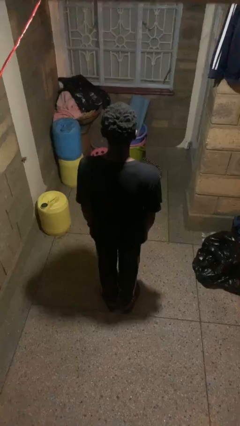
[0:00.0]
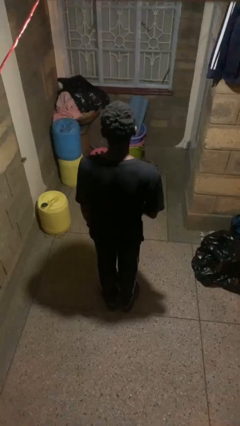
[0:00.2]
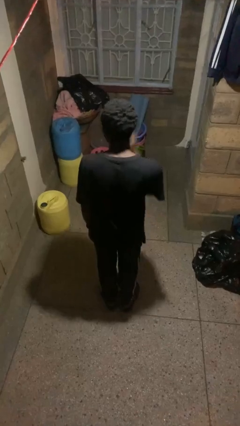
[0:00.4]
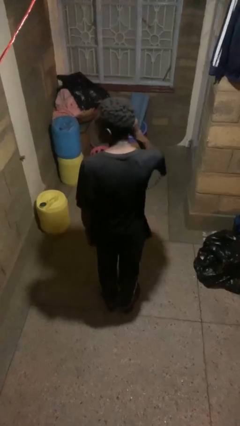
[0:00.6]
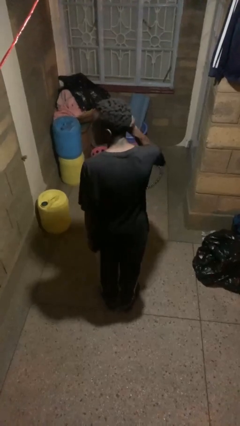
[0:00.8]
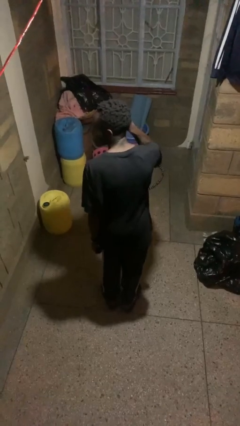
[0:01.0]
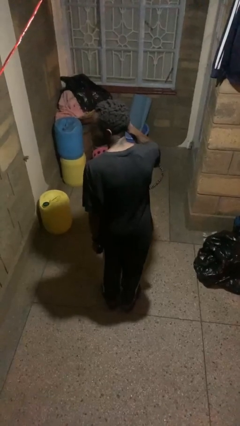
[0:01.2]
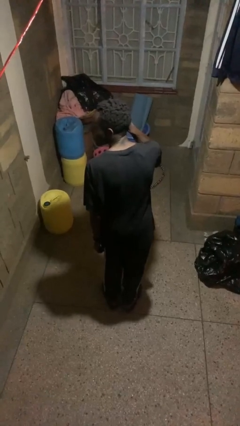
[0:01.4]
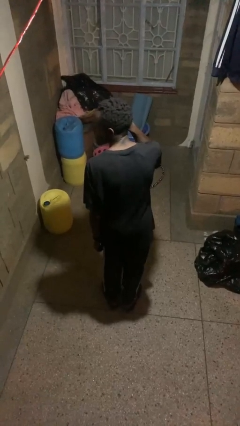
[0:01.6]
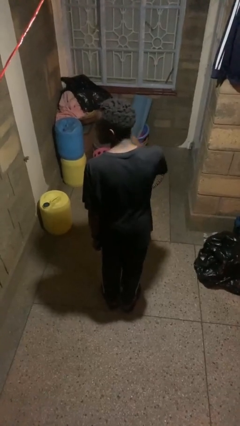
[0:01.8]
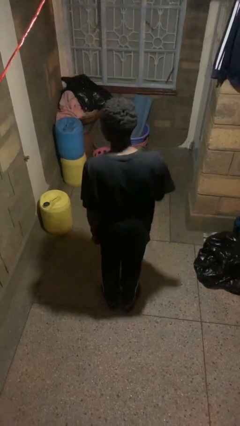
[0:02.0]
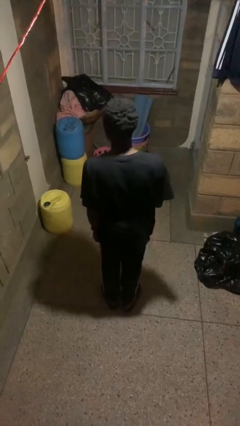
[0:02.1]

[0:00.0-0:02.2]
person touches earlobe

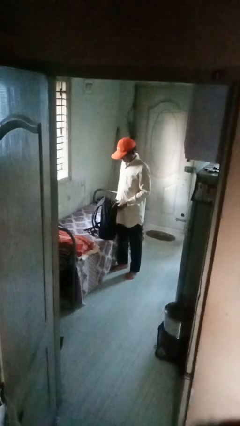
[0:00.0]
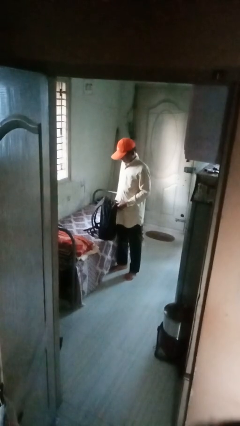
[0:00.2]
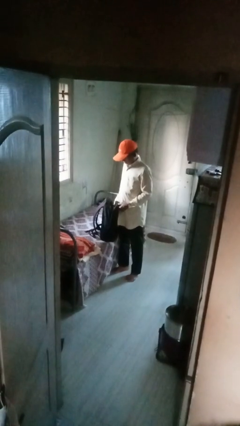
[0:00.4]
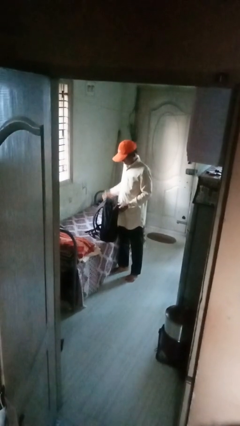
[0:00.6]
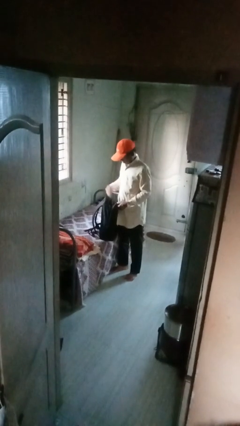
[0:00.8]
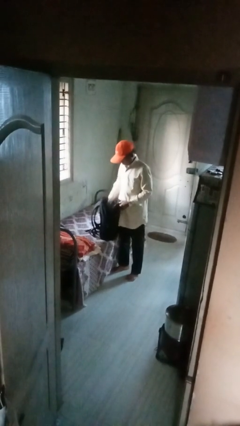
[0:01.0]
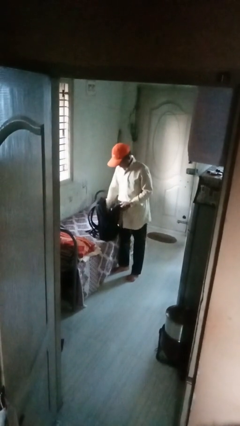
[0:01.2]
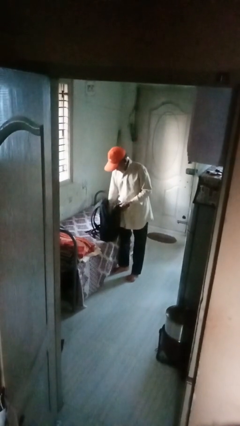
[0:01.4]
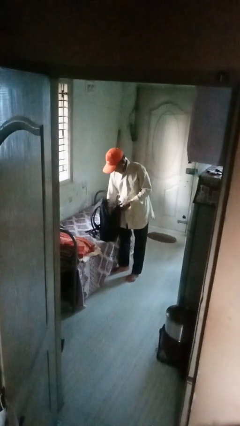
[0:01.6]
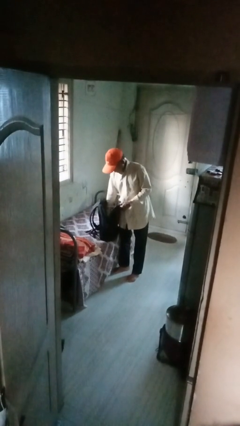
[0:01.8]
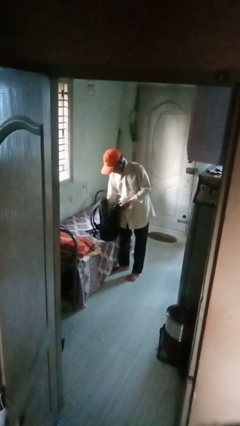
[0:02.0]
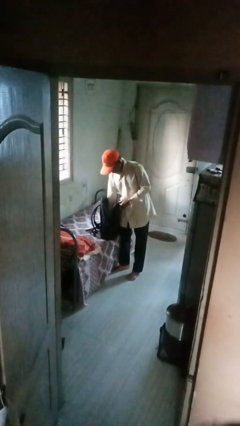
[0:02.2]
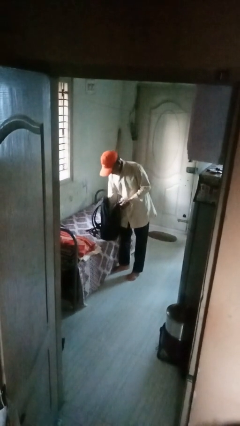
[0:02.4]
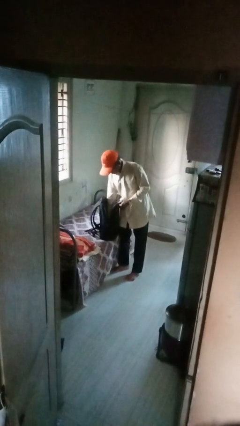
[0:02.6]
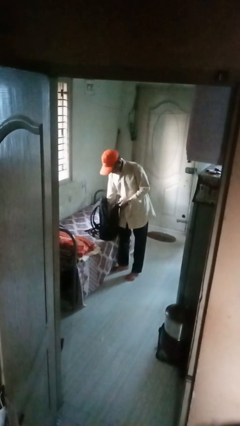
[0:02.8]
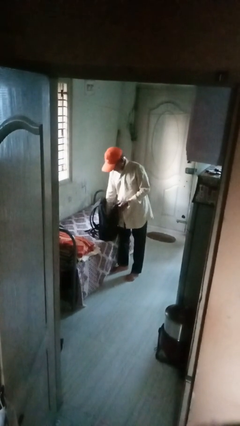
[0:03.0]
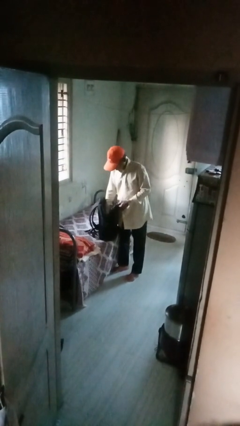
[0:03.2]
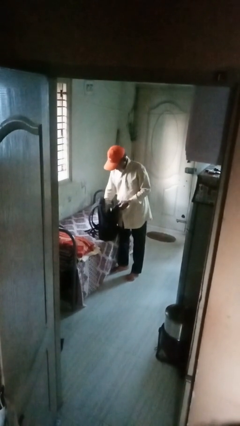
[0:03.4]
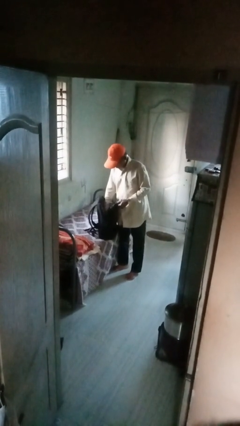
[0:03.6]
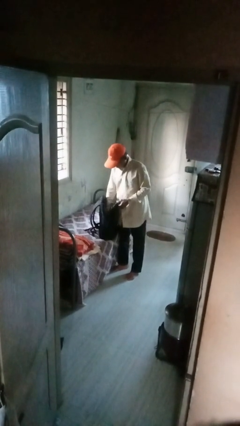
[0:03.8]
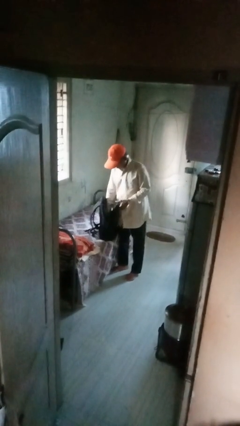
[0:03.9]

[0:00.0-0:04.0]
person searches in backpack

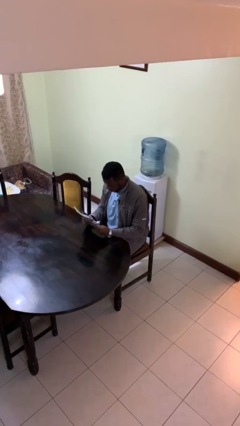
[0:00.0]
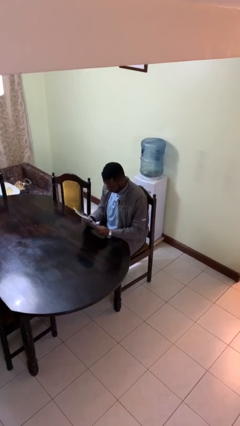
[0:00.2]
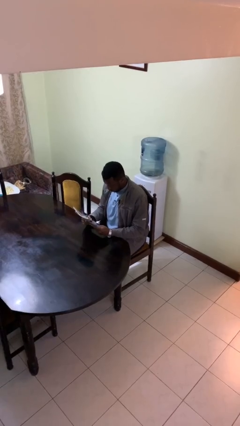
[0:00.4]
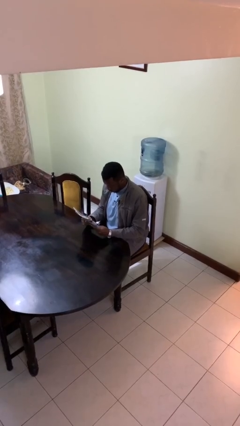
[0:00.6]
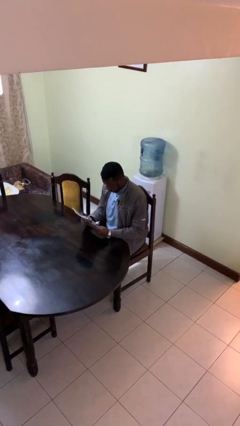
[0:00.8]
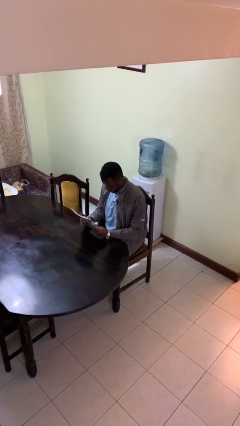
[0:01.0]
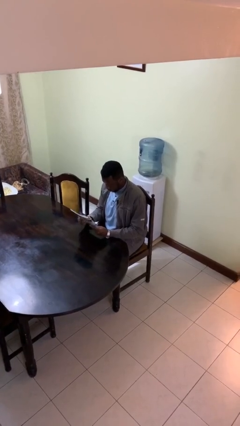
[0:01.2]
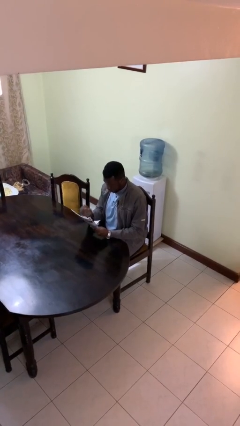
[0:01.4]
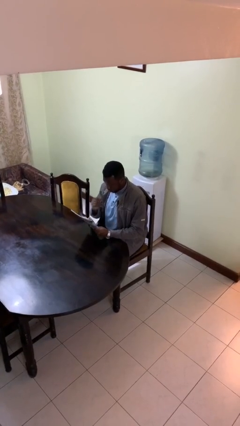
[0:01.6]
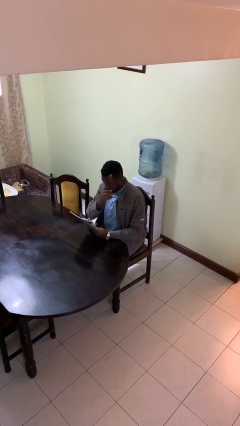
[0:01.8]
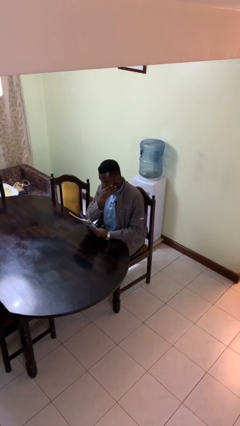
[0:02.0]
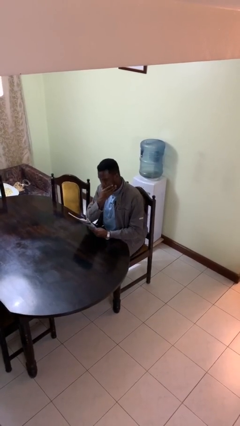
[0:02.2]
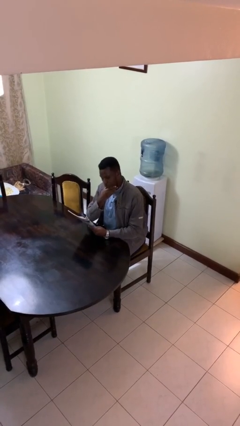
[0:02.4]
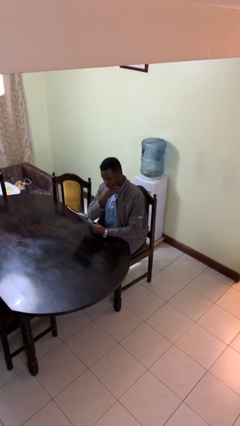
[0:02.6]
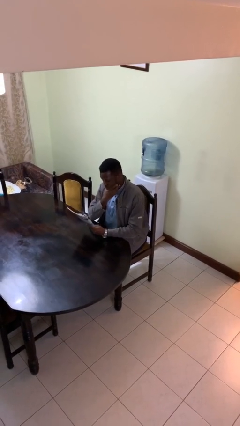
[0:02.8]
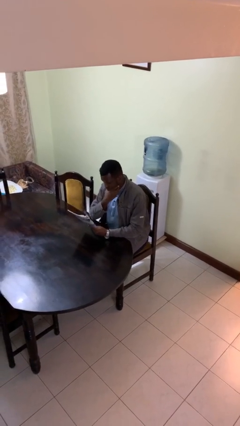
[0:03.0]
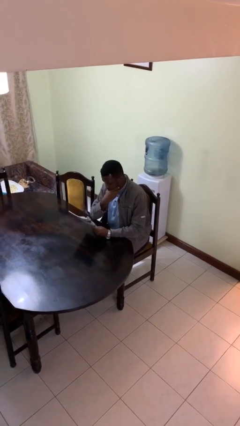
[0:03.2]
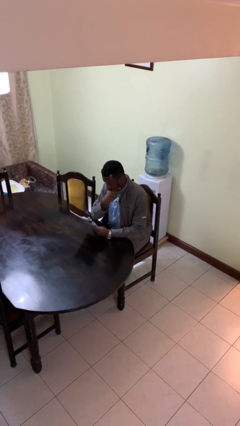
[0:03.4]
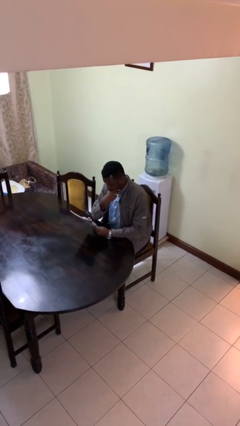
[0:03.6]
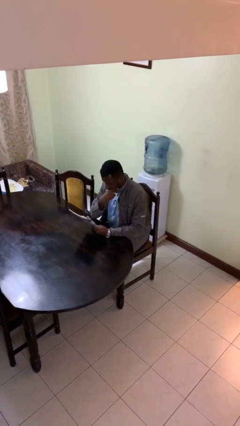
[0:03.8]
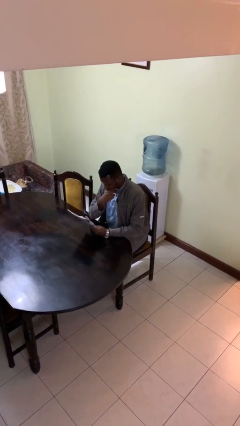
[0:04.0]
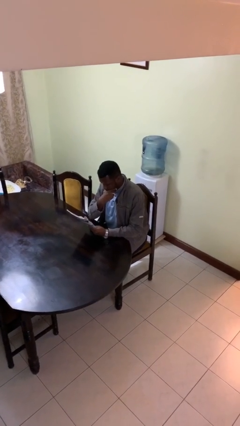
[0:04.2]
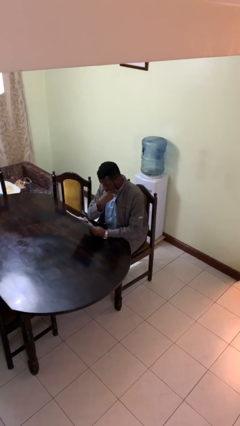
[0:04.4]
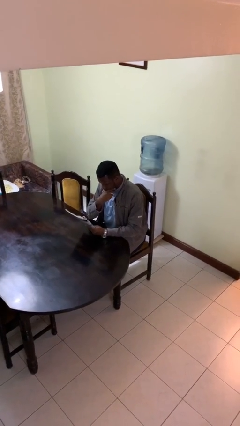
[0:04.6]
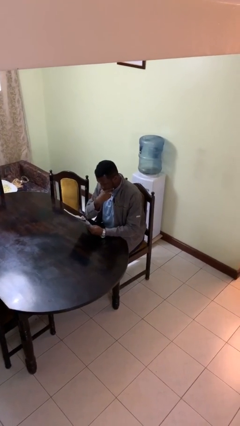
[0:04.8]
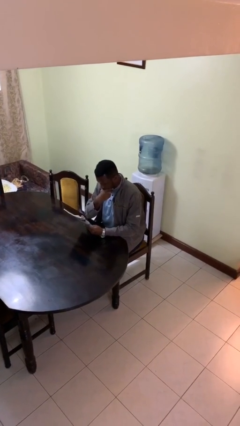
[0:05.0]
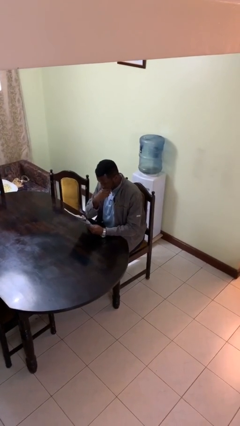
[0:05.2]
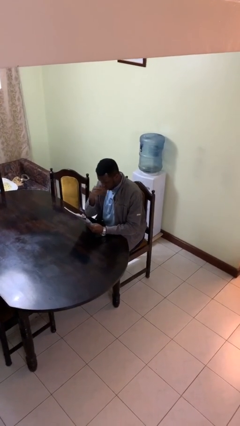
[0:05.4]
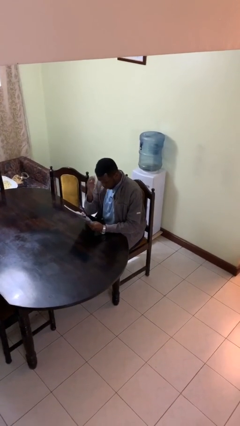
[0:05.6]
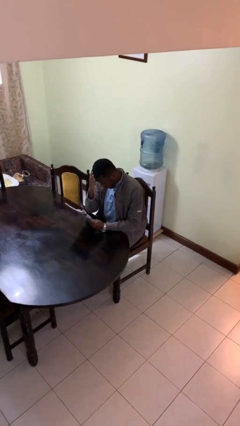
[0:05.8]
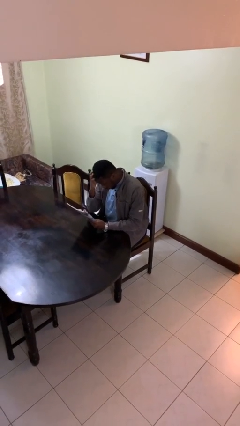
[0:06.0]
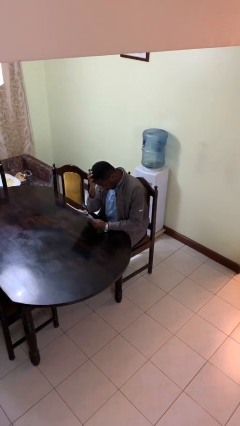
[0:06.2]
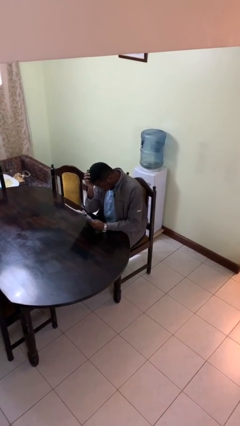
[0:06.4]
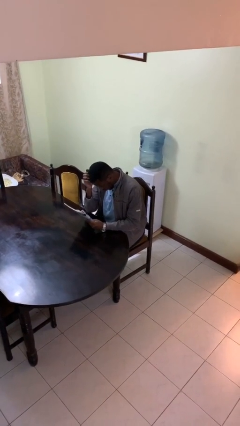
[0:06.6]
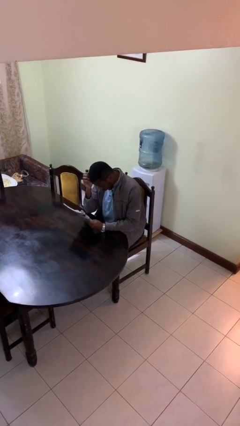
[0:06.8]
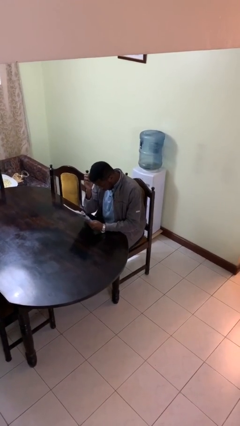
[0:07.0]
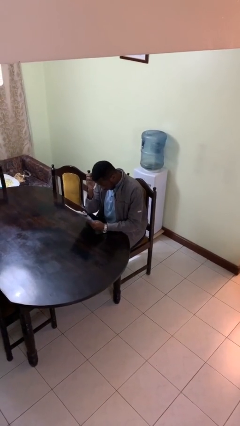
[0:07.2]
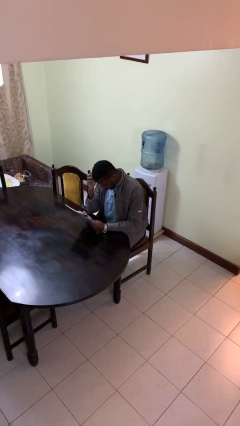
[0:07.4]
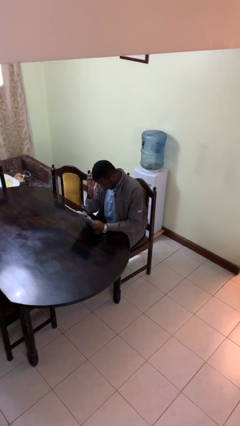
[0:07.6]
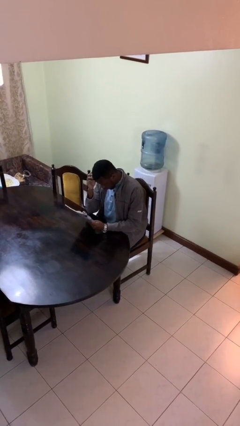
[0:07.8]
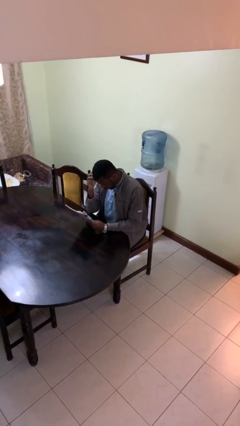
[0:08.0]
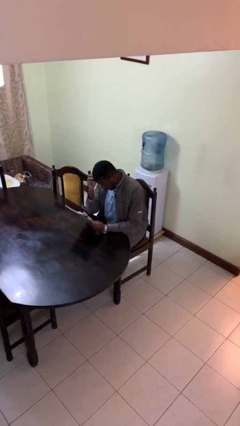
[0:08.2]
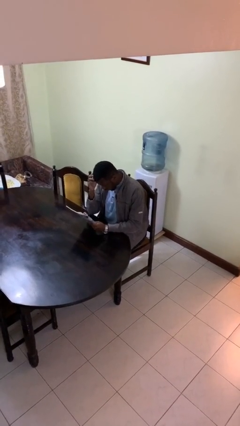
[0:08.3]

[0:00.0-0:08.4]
person reads document

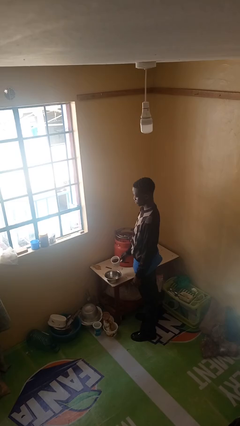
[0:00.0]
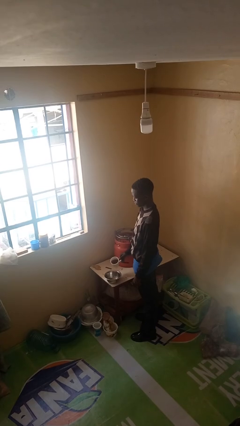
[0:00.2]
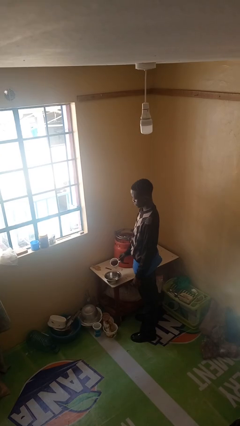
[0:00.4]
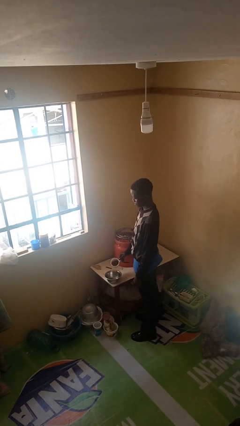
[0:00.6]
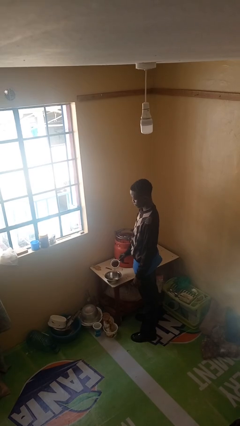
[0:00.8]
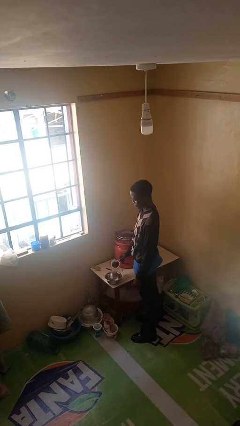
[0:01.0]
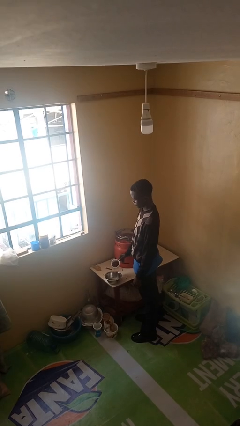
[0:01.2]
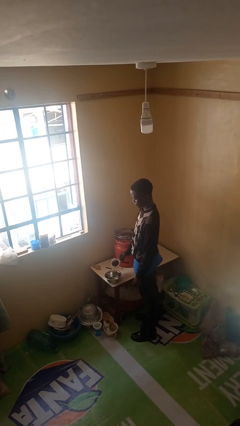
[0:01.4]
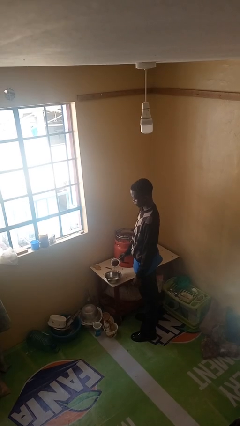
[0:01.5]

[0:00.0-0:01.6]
person pours into bowl

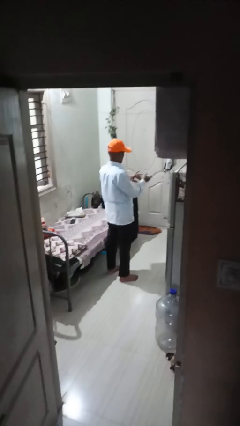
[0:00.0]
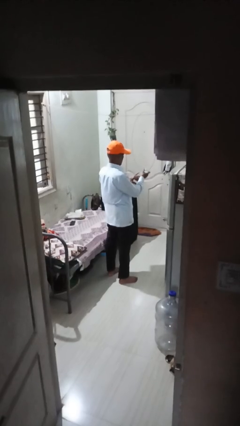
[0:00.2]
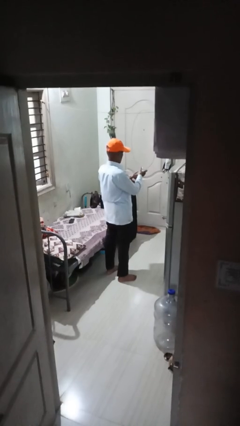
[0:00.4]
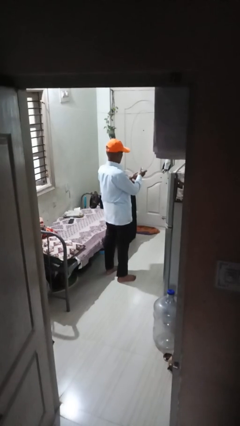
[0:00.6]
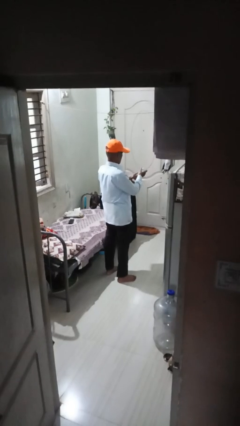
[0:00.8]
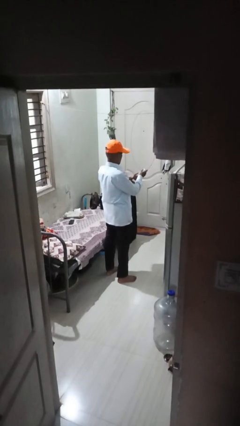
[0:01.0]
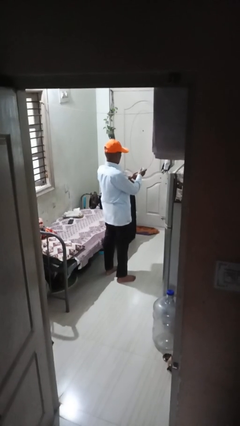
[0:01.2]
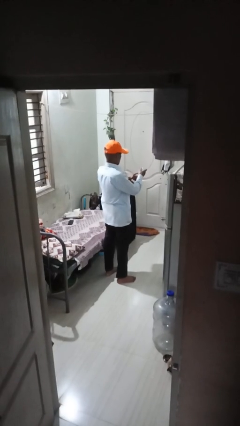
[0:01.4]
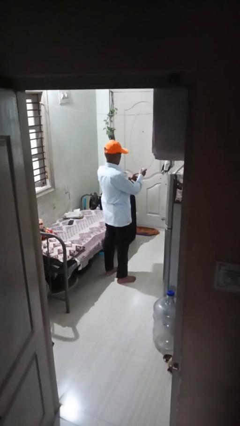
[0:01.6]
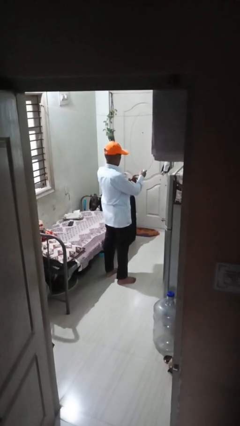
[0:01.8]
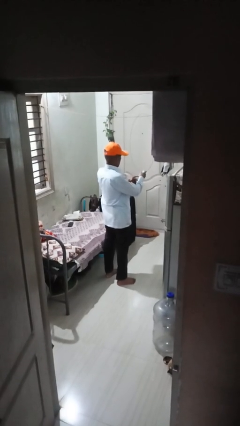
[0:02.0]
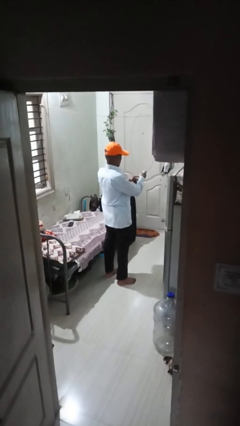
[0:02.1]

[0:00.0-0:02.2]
person clips fingernails
